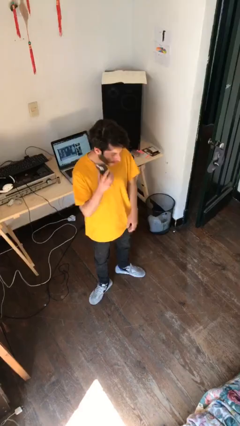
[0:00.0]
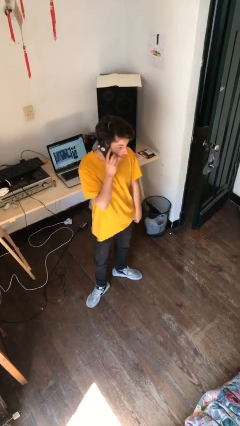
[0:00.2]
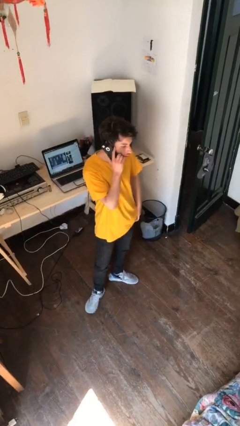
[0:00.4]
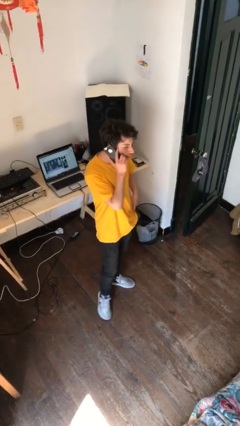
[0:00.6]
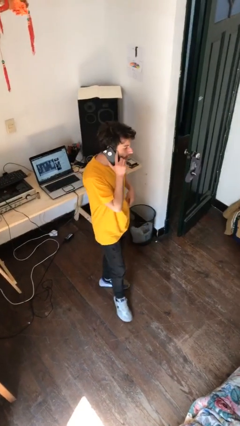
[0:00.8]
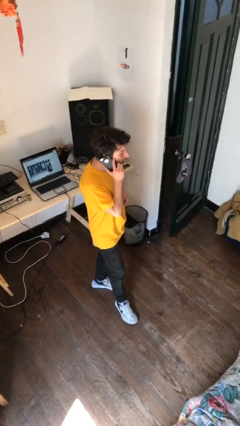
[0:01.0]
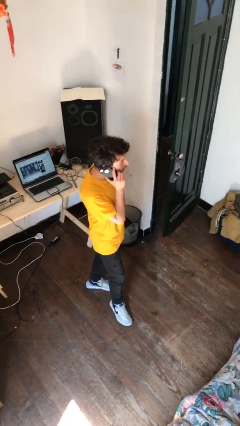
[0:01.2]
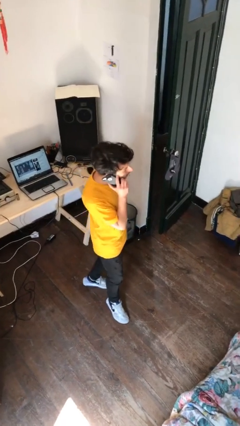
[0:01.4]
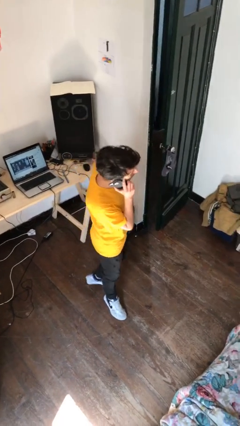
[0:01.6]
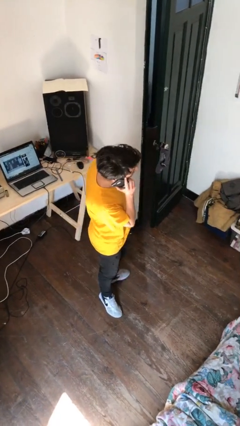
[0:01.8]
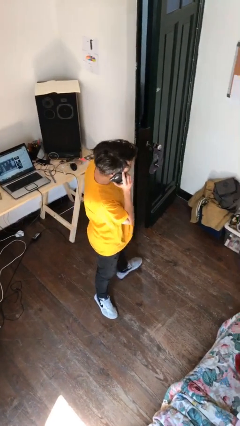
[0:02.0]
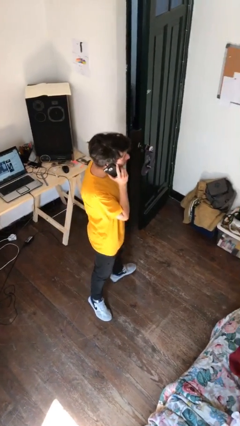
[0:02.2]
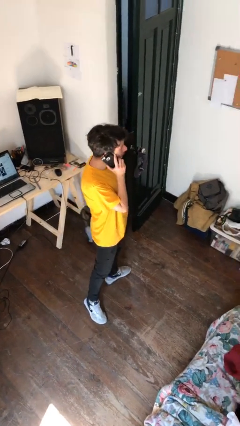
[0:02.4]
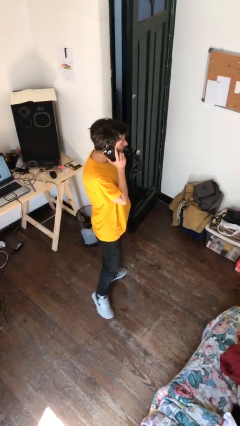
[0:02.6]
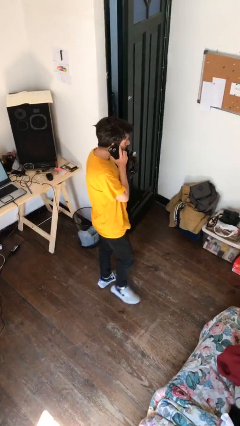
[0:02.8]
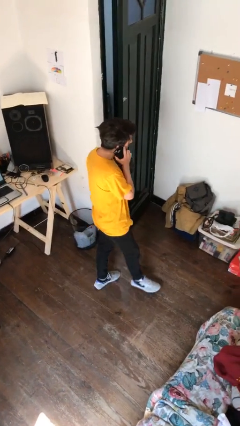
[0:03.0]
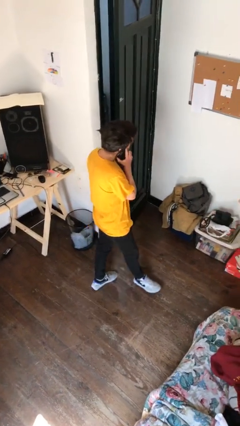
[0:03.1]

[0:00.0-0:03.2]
person talks on phone

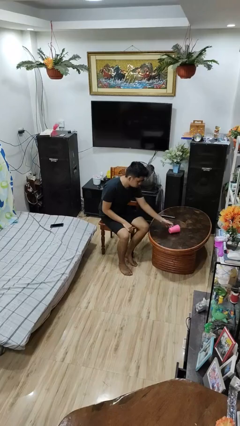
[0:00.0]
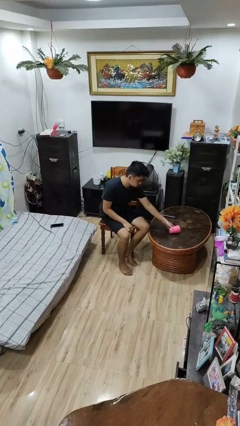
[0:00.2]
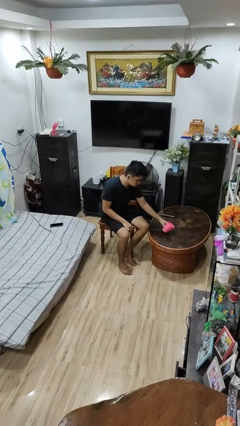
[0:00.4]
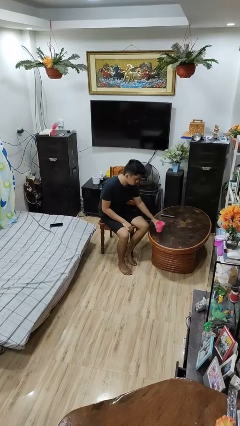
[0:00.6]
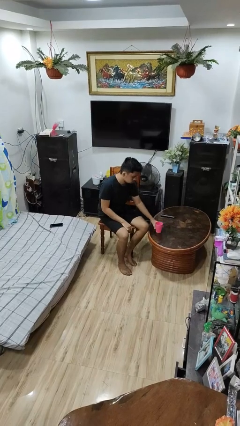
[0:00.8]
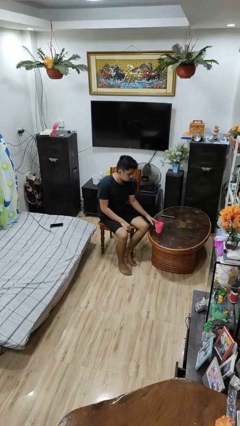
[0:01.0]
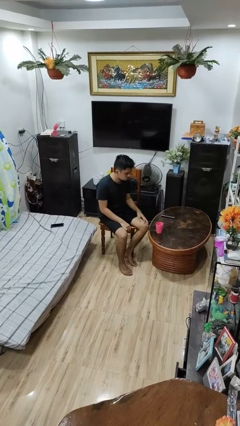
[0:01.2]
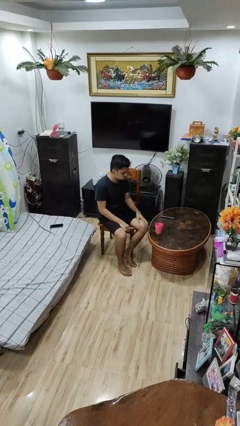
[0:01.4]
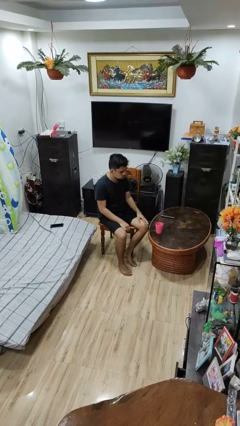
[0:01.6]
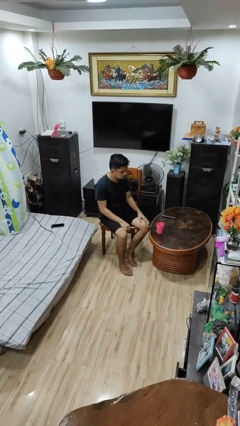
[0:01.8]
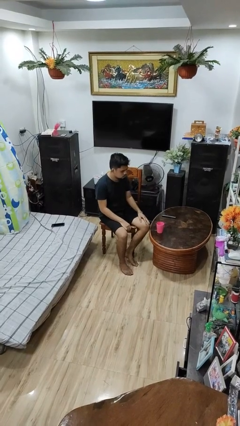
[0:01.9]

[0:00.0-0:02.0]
person sets upright glass

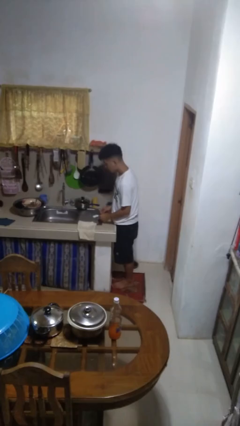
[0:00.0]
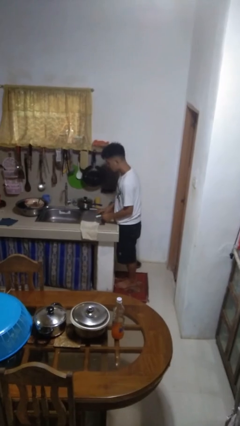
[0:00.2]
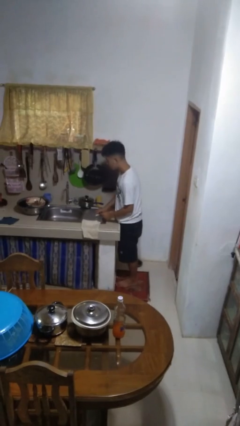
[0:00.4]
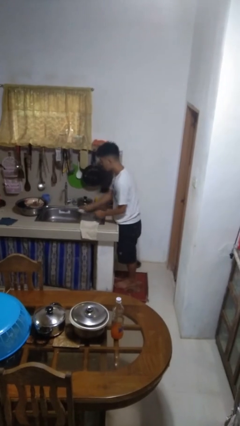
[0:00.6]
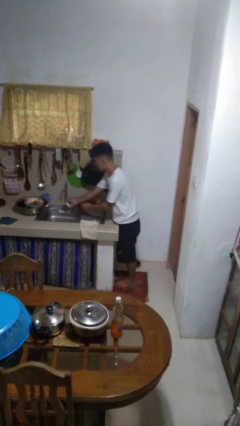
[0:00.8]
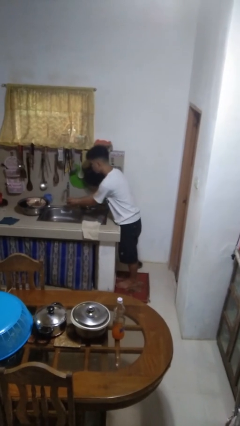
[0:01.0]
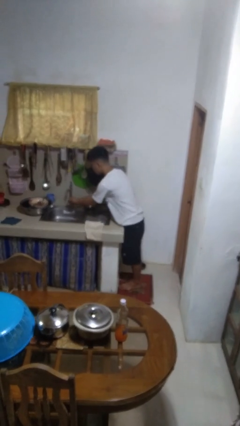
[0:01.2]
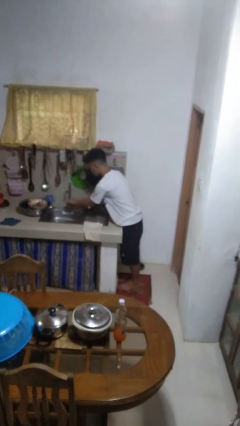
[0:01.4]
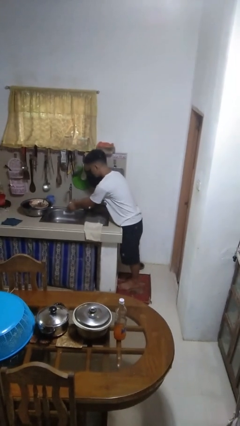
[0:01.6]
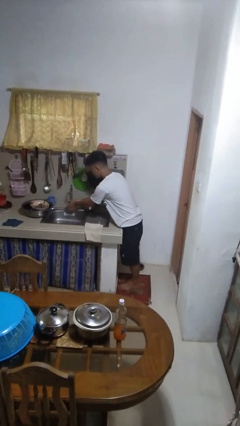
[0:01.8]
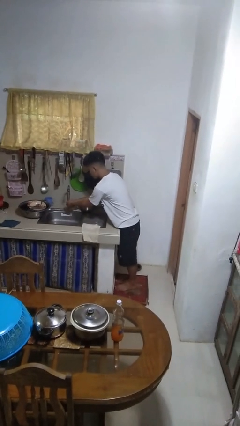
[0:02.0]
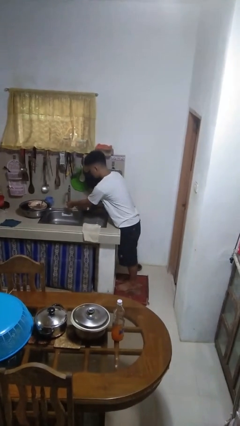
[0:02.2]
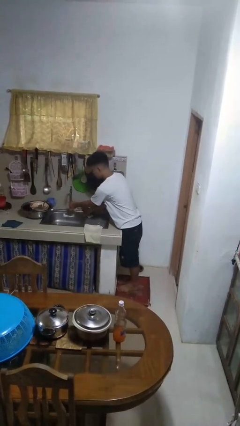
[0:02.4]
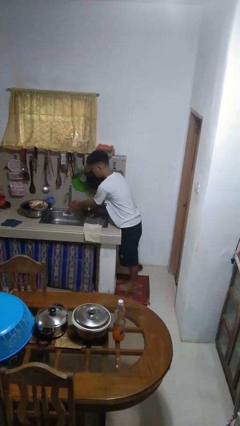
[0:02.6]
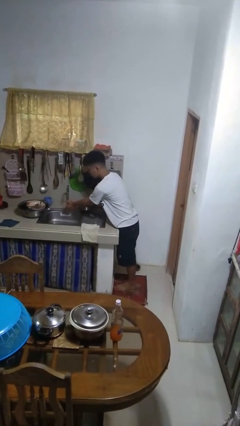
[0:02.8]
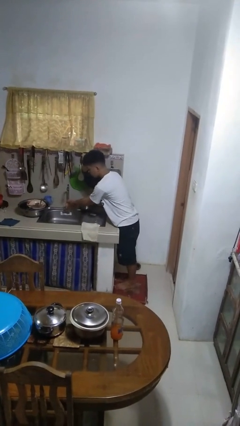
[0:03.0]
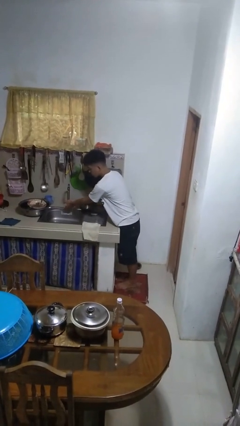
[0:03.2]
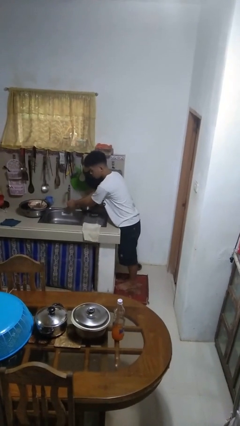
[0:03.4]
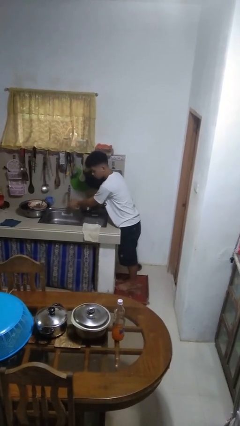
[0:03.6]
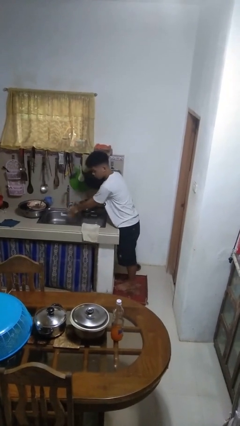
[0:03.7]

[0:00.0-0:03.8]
person washes hands

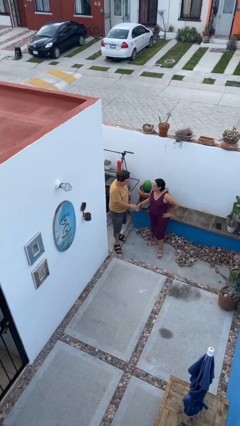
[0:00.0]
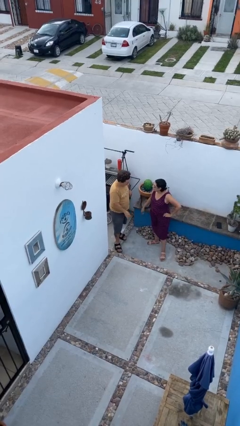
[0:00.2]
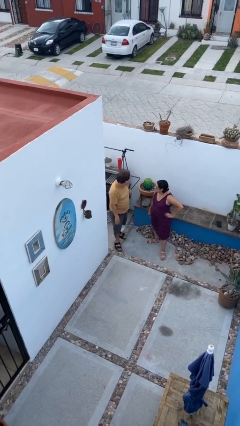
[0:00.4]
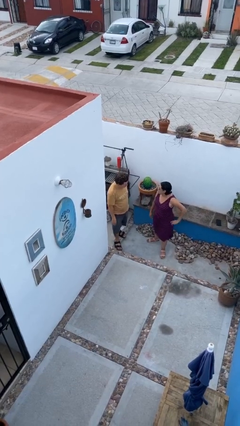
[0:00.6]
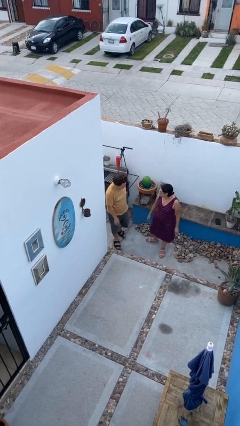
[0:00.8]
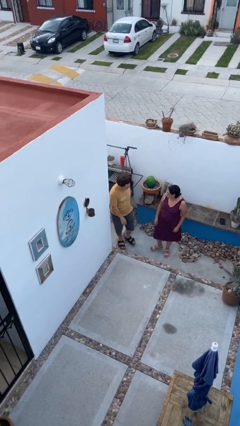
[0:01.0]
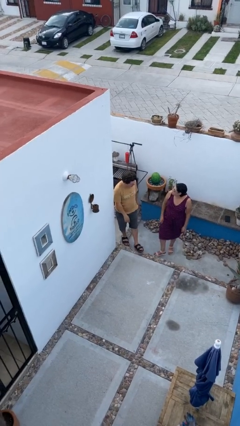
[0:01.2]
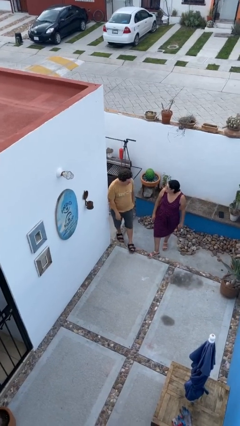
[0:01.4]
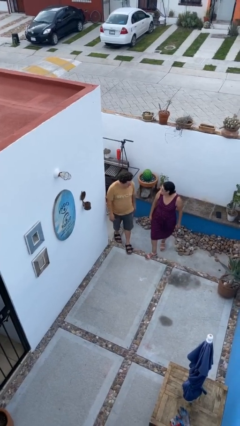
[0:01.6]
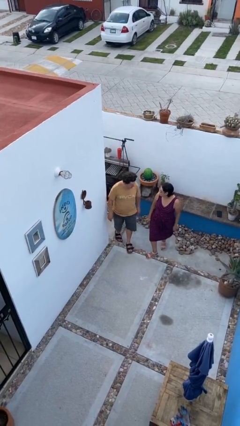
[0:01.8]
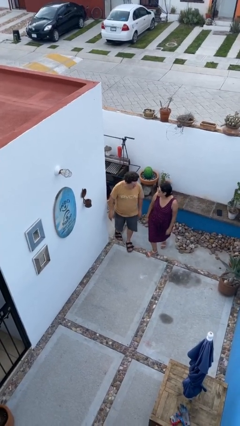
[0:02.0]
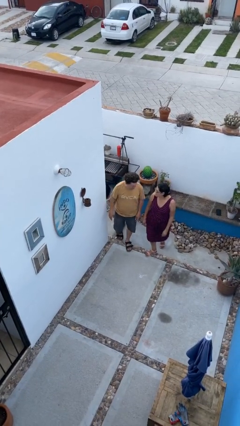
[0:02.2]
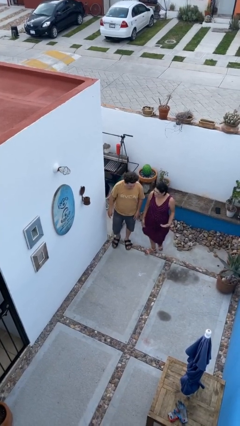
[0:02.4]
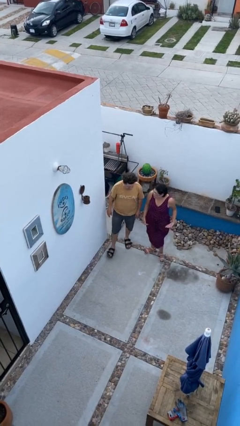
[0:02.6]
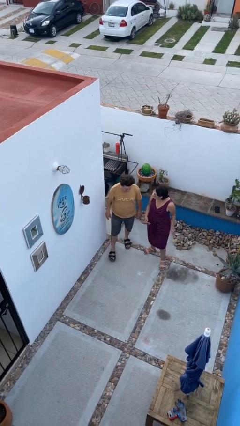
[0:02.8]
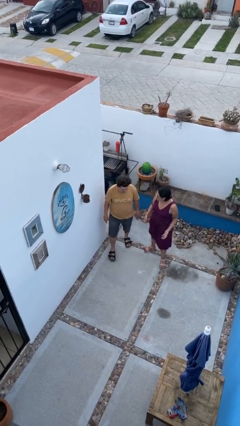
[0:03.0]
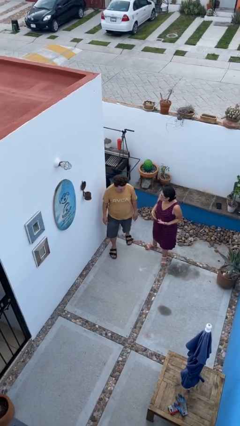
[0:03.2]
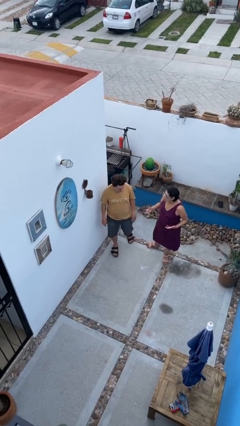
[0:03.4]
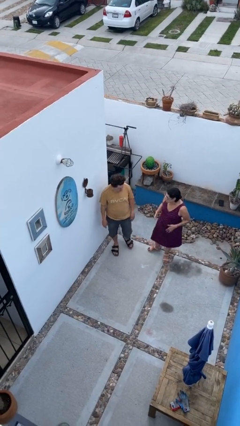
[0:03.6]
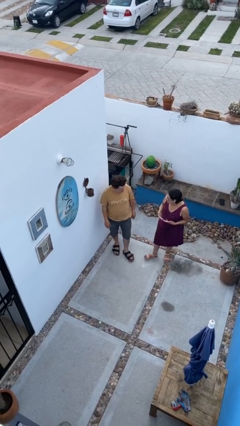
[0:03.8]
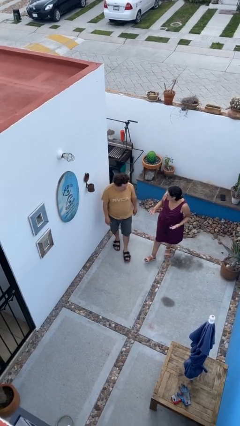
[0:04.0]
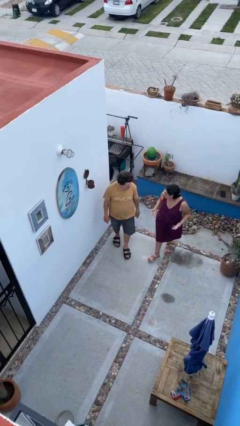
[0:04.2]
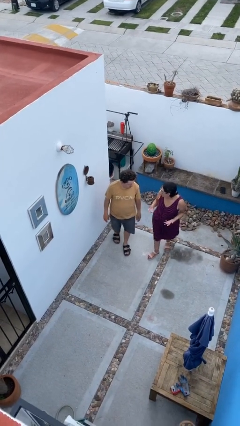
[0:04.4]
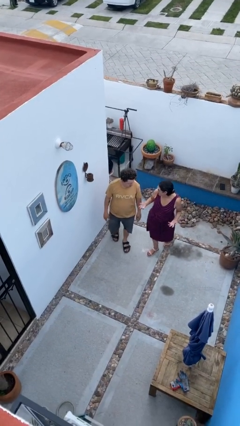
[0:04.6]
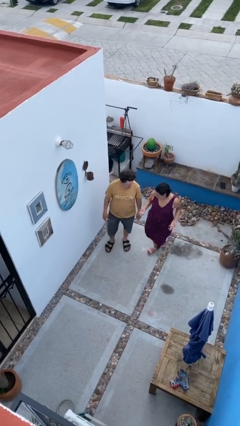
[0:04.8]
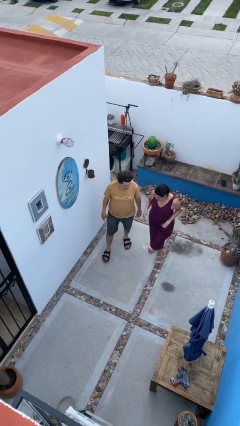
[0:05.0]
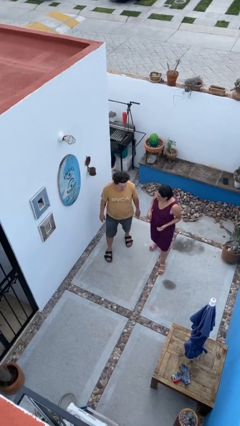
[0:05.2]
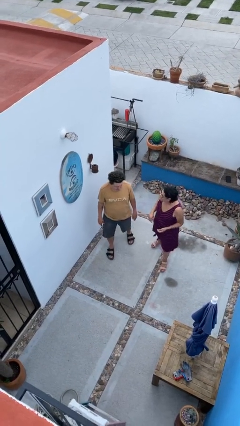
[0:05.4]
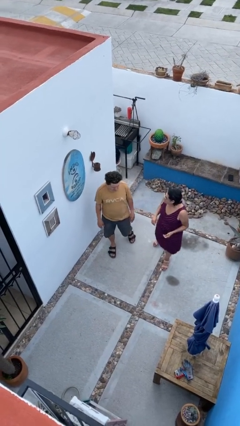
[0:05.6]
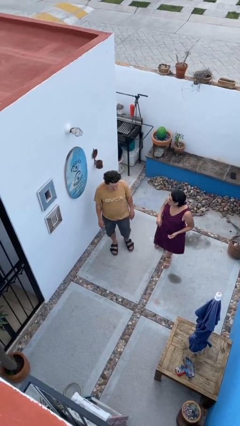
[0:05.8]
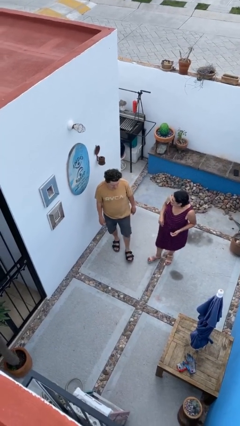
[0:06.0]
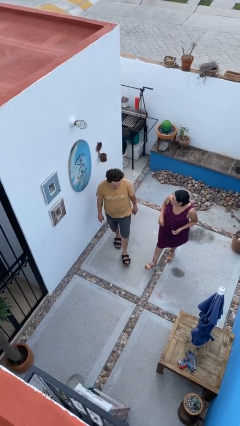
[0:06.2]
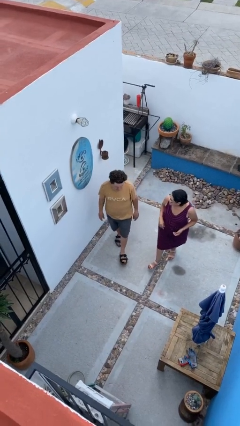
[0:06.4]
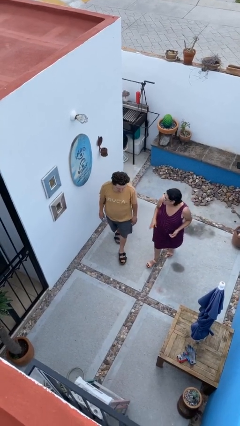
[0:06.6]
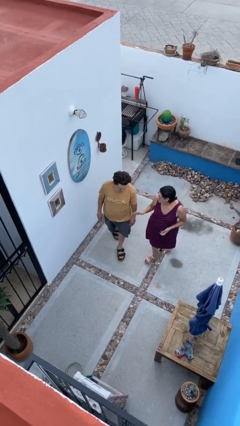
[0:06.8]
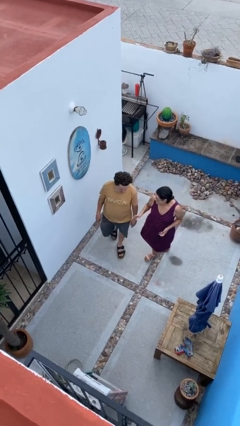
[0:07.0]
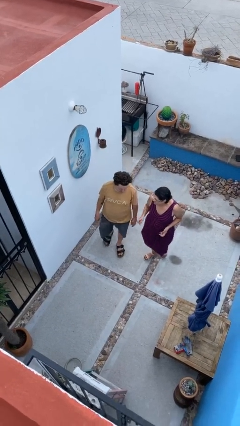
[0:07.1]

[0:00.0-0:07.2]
person talks to person

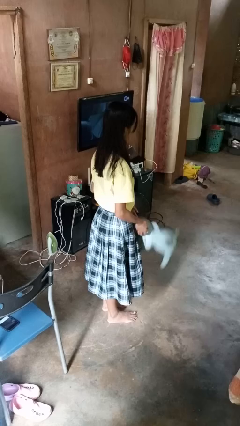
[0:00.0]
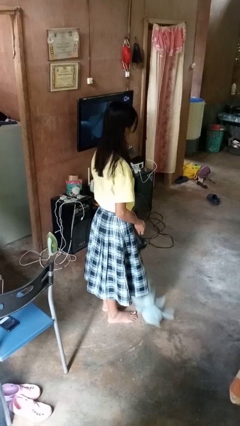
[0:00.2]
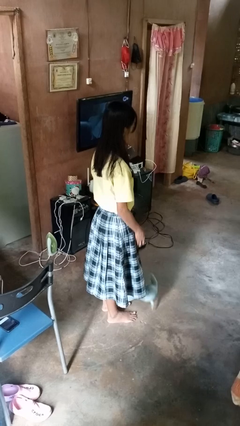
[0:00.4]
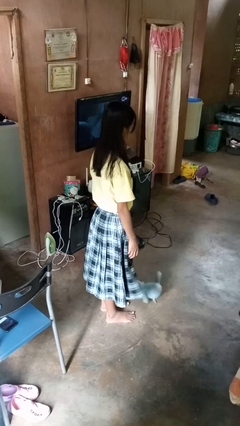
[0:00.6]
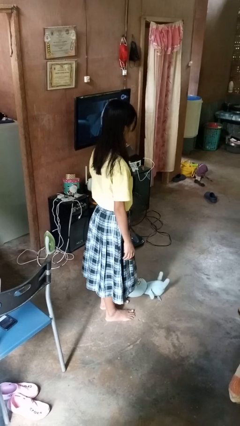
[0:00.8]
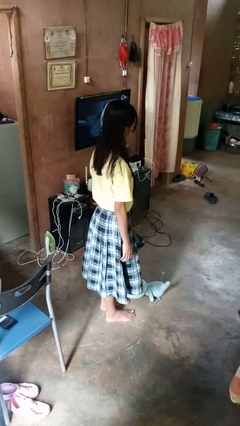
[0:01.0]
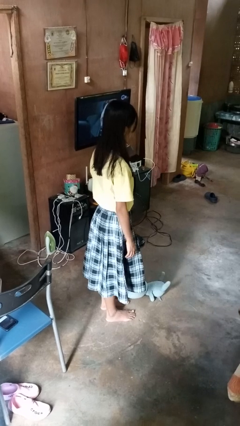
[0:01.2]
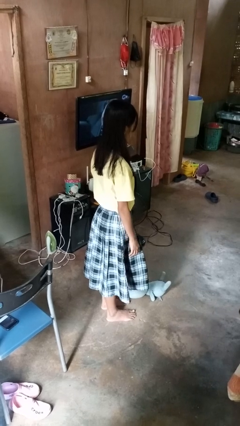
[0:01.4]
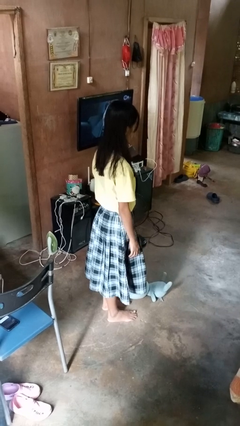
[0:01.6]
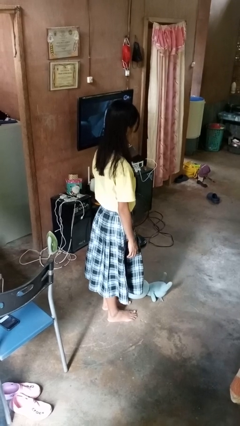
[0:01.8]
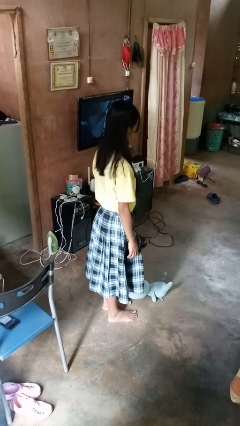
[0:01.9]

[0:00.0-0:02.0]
person drops object
